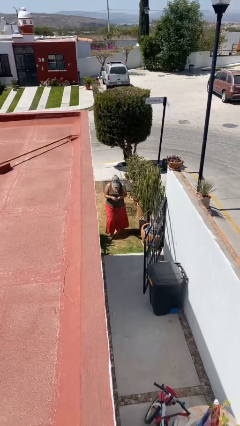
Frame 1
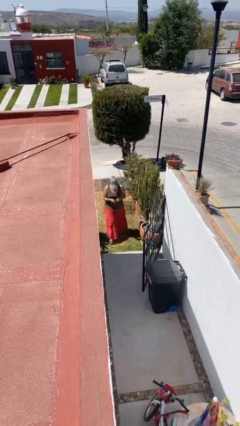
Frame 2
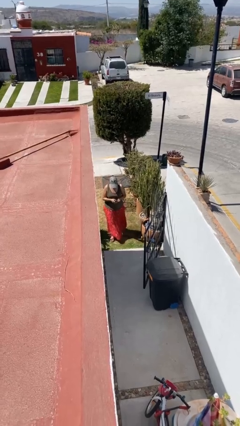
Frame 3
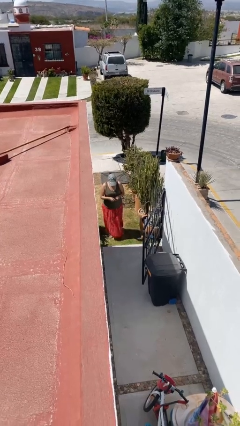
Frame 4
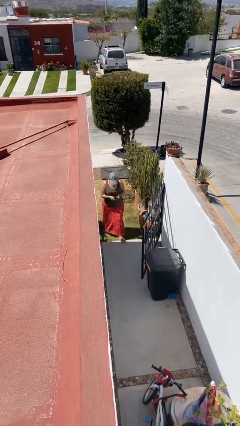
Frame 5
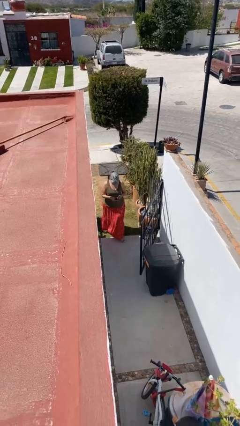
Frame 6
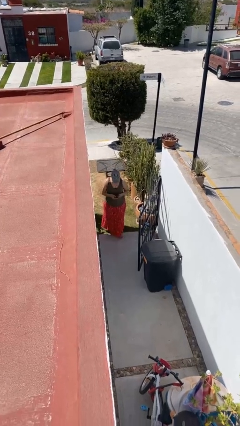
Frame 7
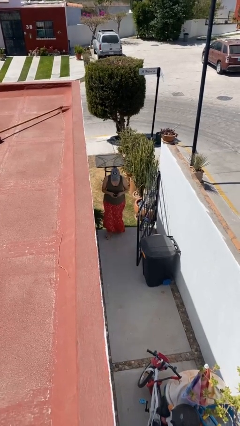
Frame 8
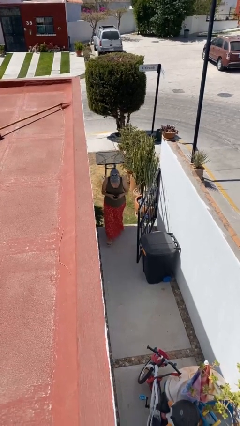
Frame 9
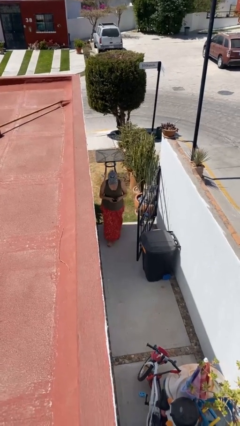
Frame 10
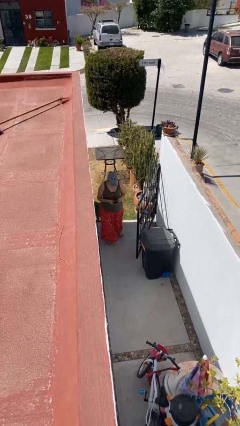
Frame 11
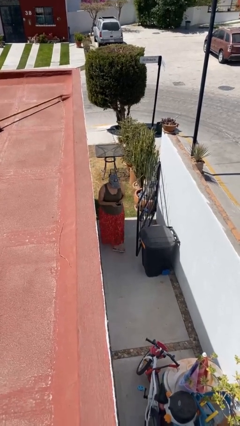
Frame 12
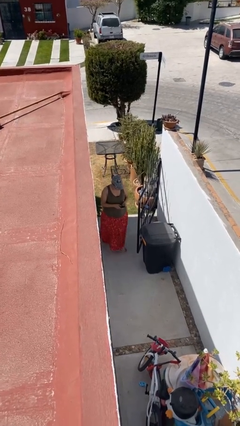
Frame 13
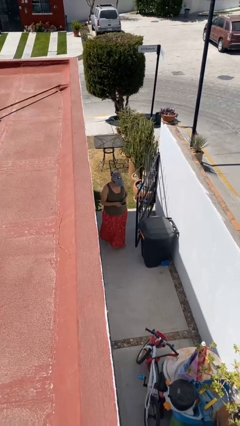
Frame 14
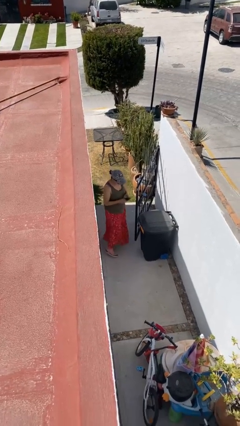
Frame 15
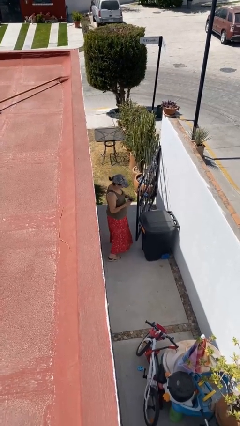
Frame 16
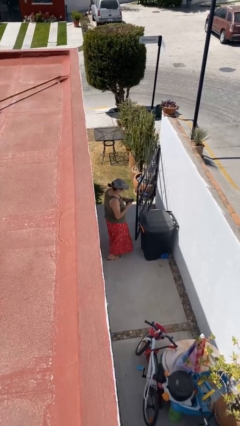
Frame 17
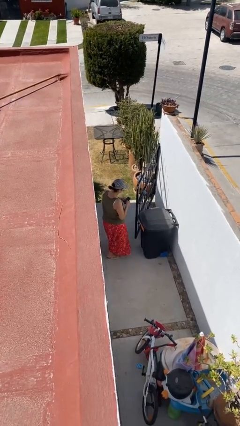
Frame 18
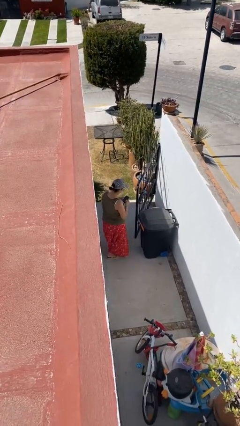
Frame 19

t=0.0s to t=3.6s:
person enters scene through structure

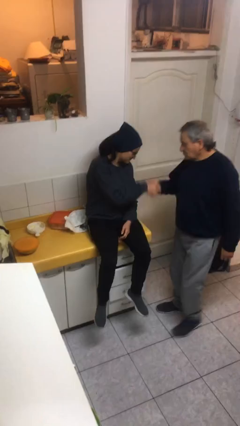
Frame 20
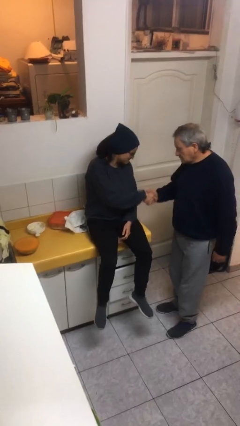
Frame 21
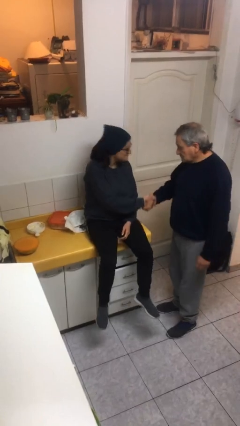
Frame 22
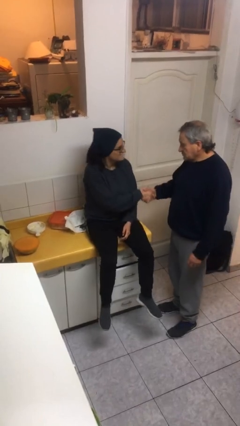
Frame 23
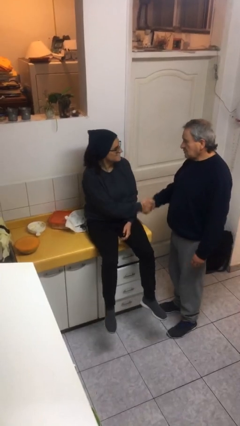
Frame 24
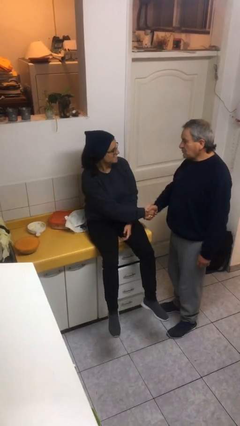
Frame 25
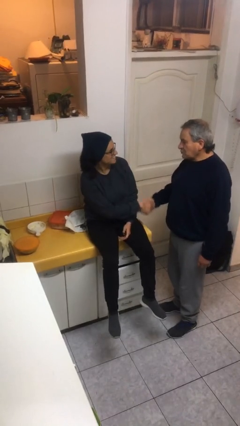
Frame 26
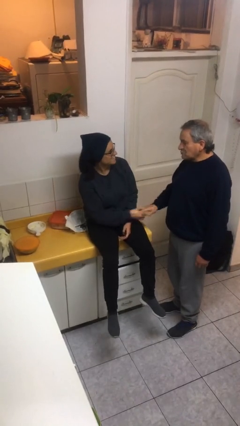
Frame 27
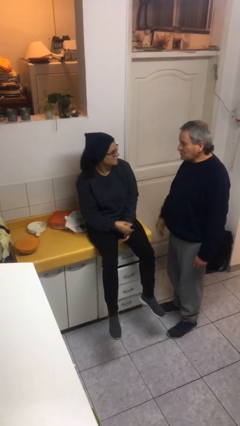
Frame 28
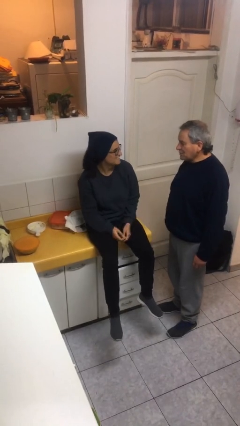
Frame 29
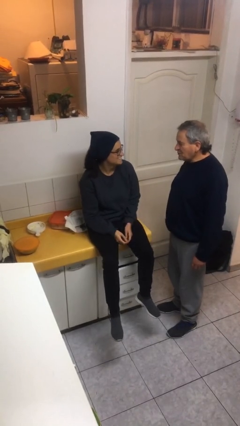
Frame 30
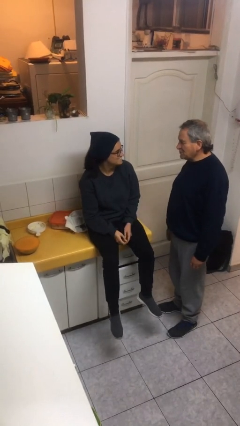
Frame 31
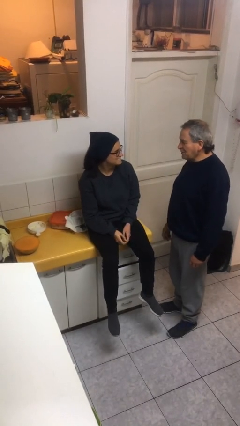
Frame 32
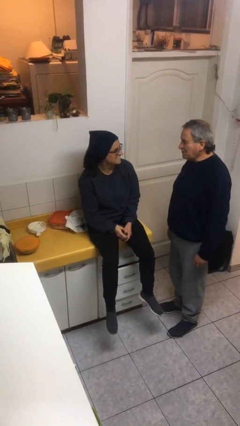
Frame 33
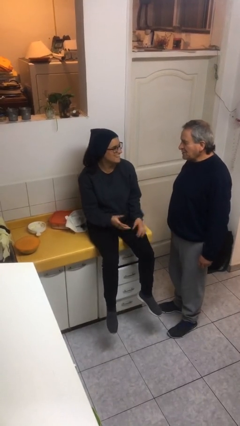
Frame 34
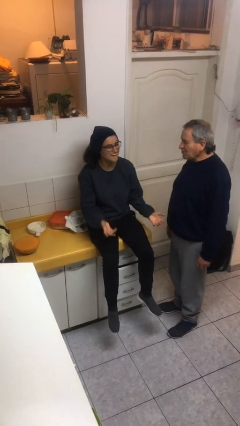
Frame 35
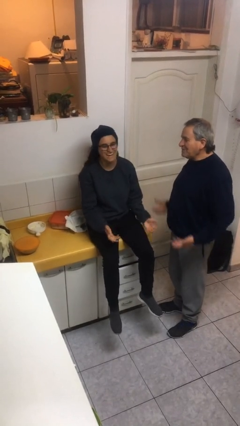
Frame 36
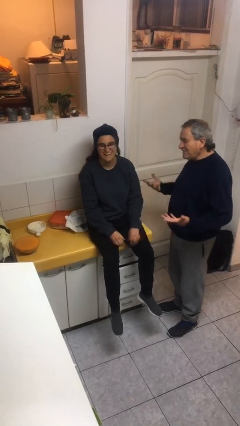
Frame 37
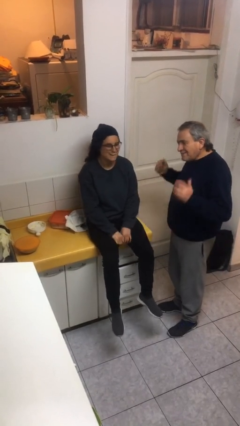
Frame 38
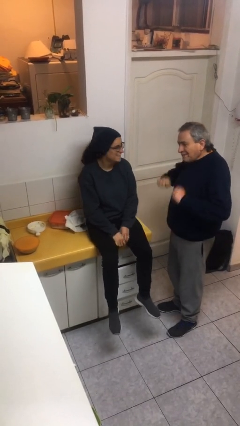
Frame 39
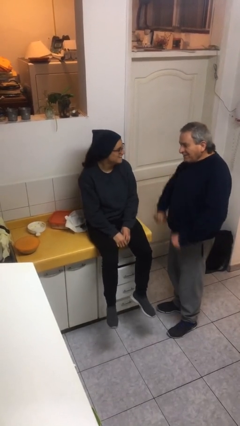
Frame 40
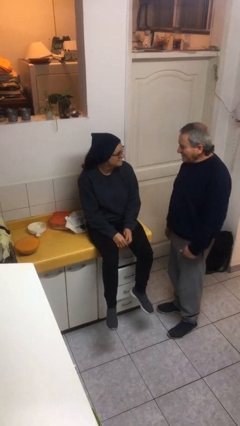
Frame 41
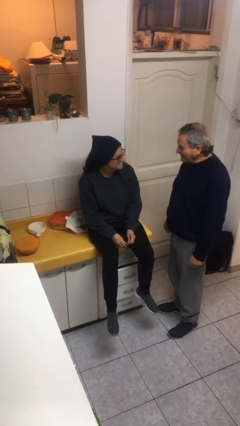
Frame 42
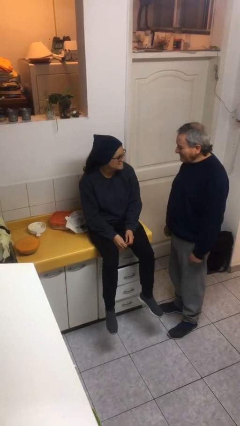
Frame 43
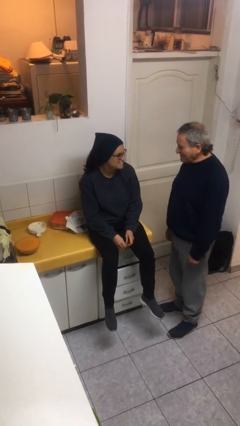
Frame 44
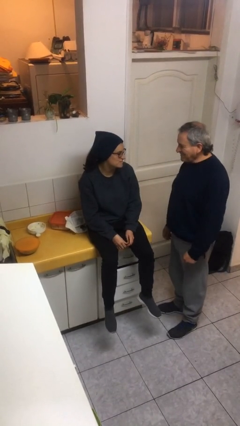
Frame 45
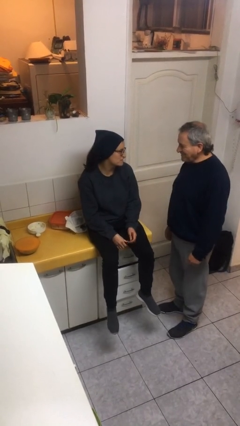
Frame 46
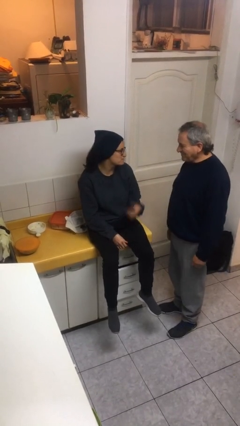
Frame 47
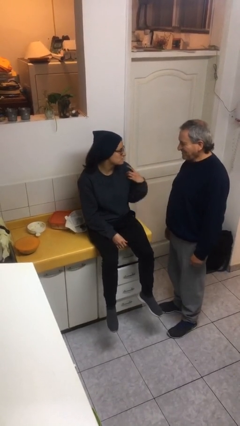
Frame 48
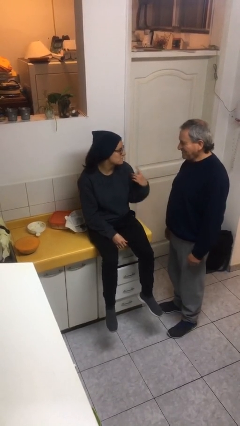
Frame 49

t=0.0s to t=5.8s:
person shakes hand

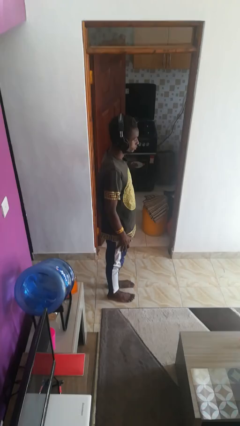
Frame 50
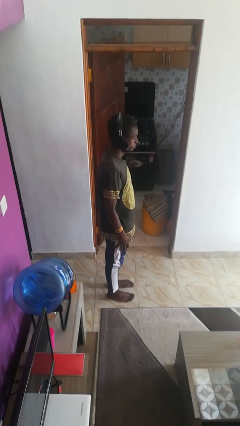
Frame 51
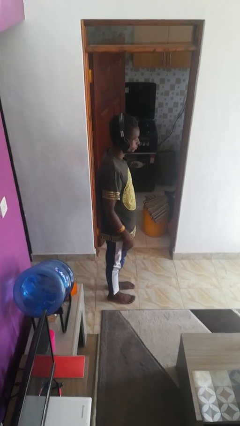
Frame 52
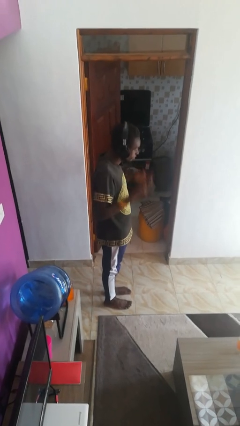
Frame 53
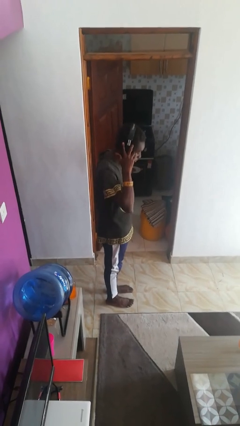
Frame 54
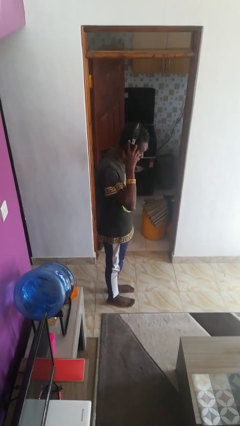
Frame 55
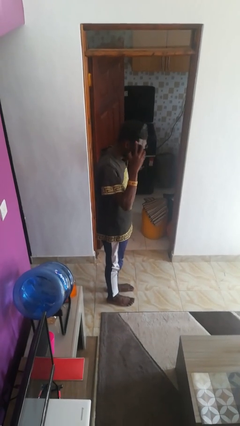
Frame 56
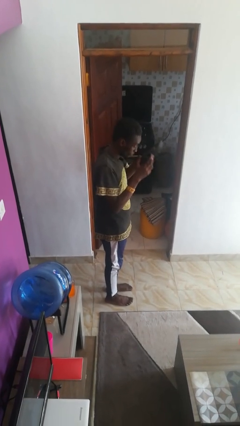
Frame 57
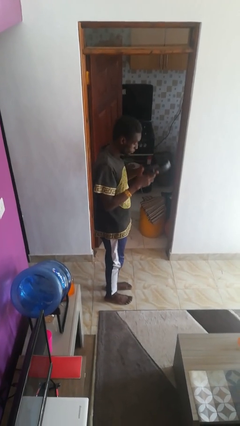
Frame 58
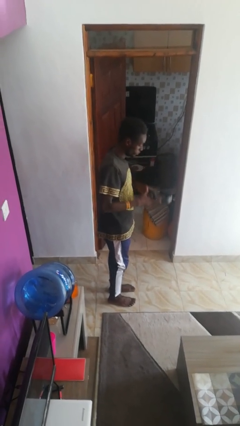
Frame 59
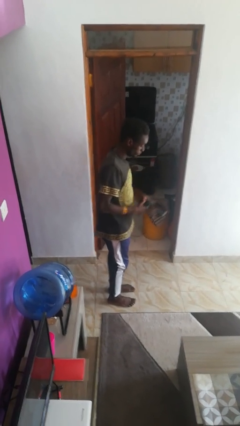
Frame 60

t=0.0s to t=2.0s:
person takes off headphones

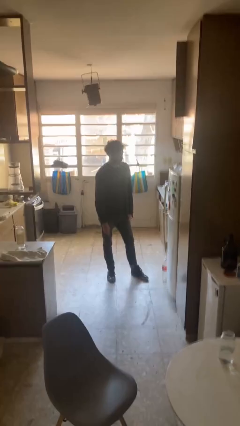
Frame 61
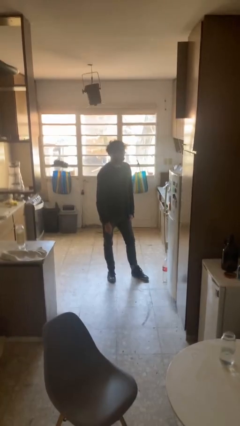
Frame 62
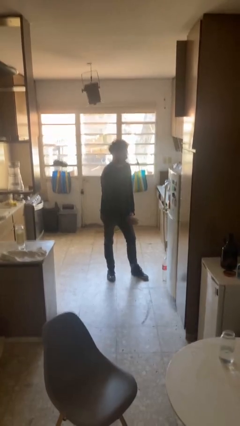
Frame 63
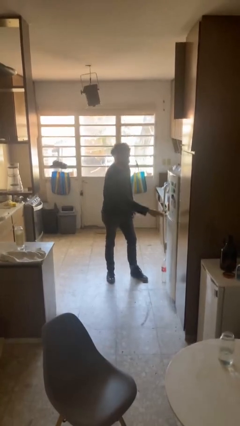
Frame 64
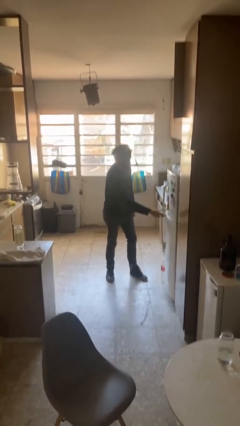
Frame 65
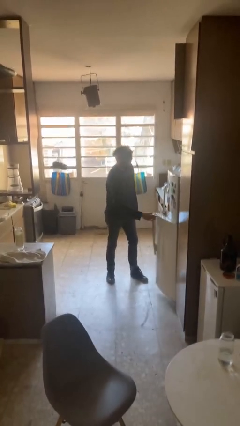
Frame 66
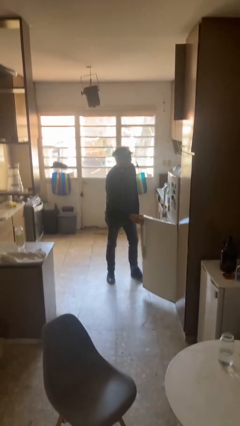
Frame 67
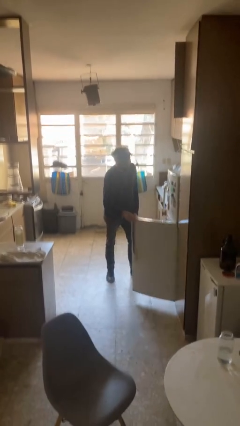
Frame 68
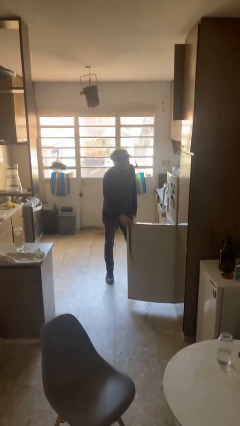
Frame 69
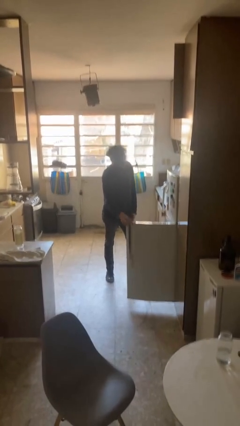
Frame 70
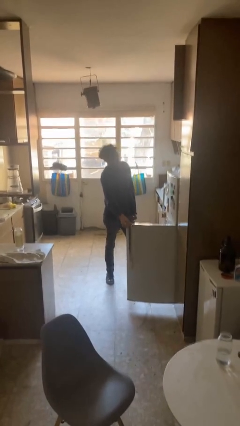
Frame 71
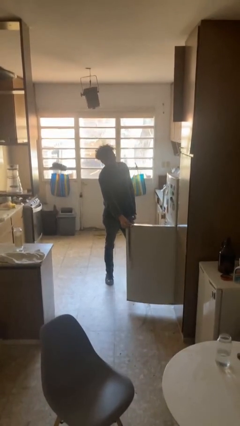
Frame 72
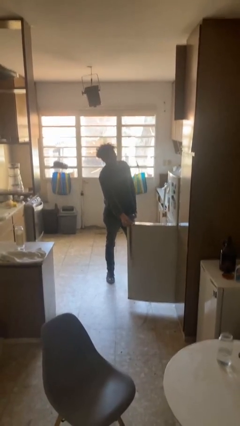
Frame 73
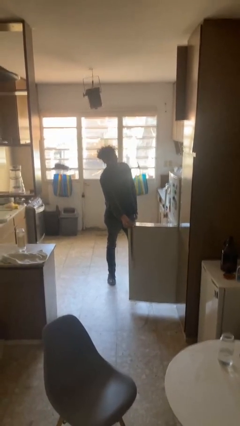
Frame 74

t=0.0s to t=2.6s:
person opens refrigerator

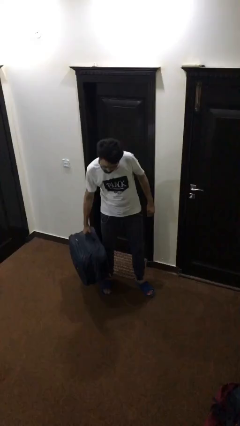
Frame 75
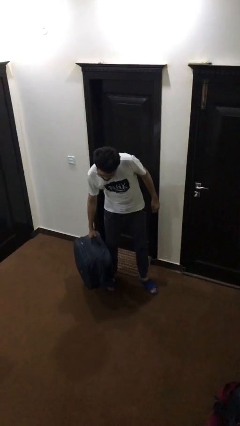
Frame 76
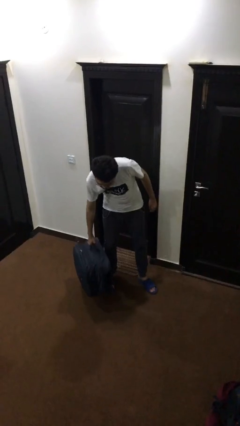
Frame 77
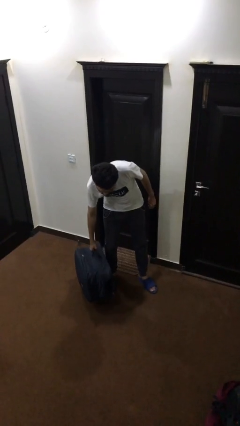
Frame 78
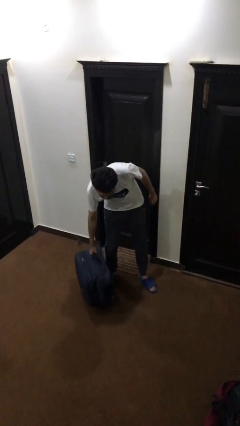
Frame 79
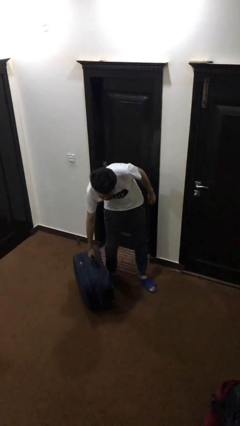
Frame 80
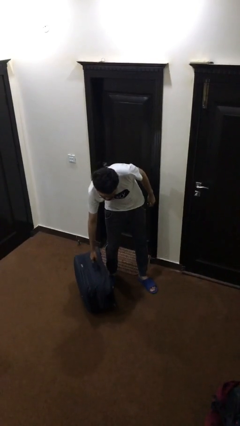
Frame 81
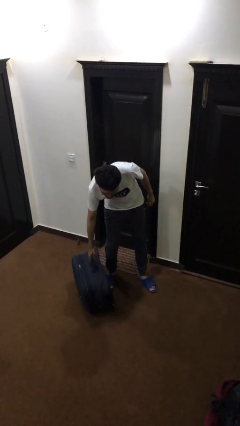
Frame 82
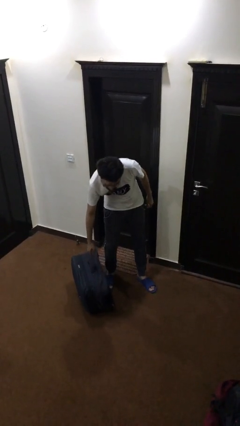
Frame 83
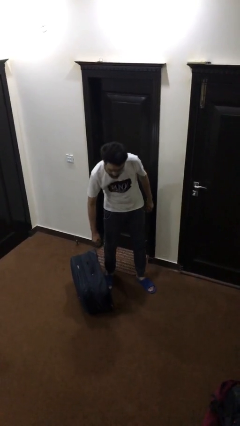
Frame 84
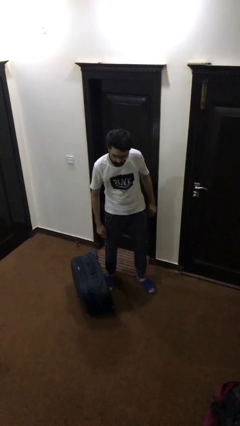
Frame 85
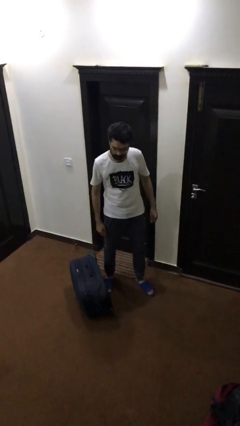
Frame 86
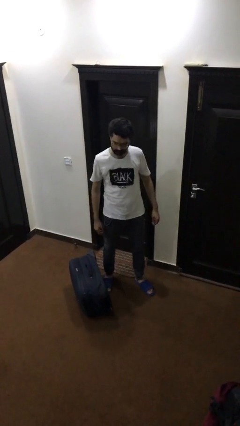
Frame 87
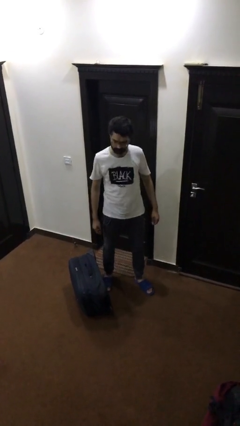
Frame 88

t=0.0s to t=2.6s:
person puts down object on floor

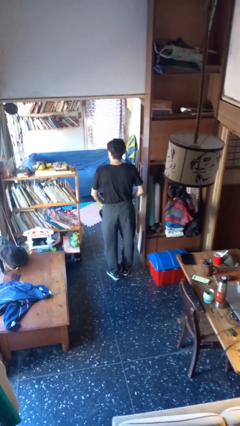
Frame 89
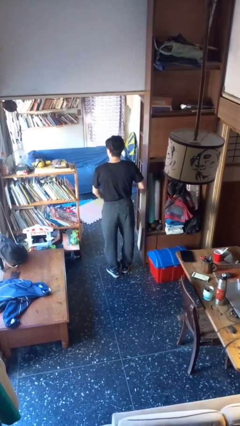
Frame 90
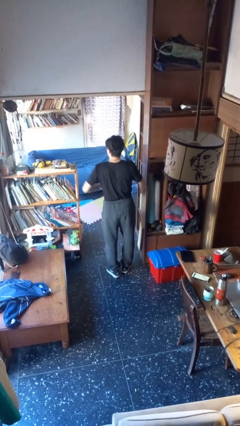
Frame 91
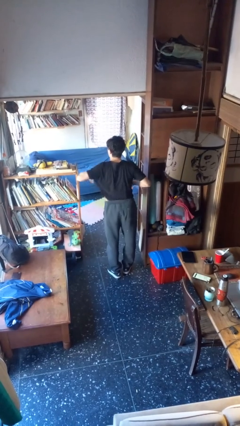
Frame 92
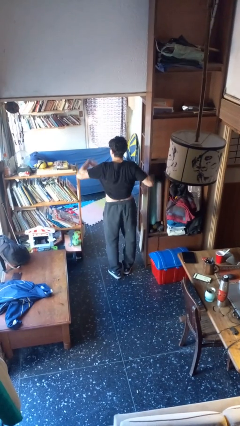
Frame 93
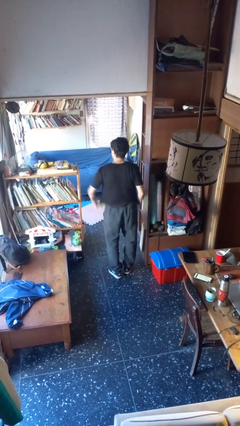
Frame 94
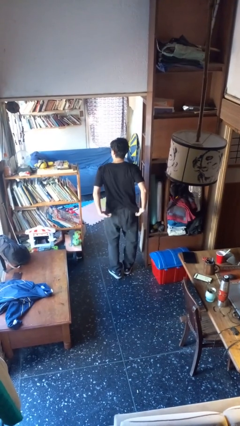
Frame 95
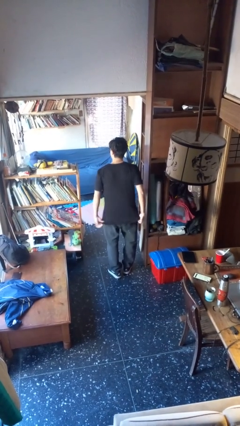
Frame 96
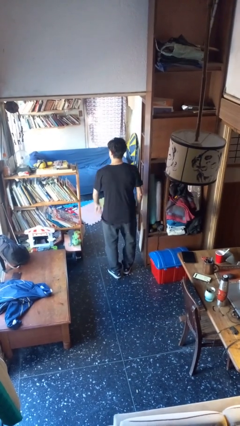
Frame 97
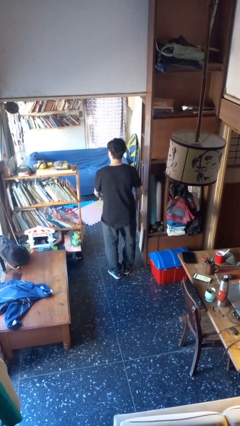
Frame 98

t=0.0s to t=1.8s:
person untucks shirt
